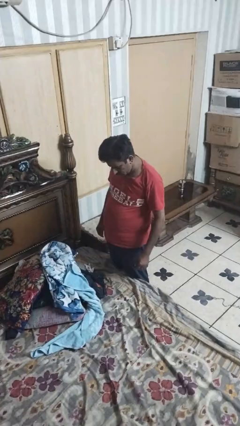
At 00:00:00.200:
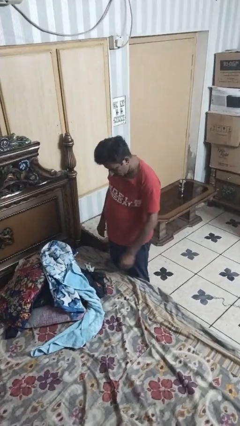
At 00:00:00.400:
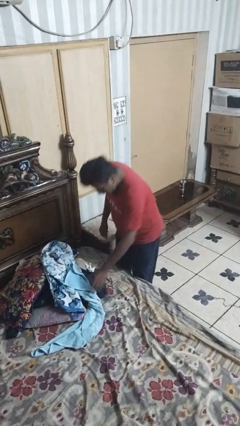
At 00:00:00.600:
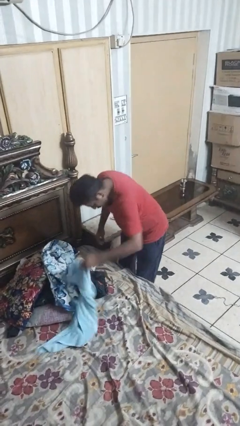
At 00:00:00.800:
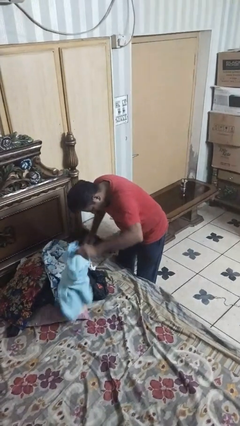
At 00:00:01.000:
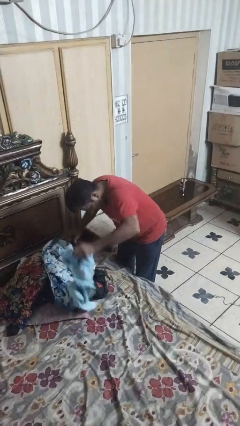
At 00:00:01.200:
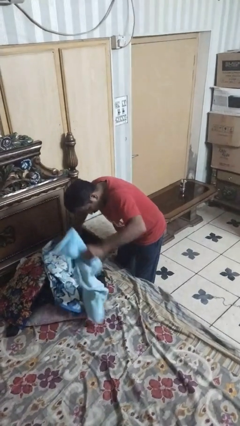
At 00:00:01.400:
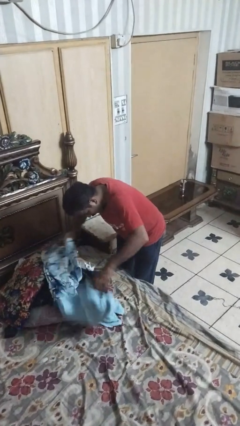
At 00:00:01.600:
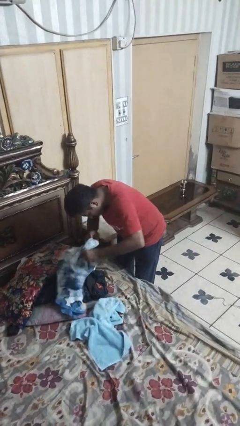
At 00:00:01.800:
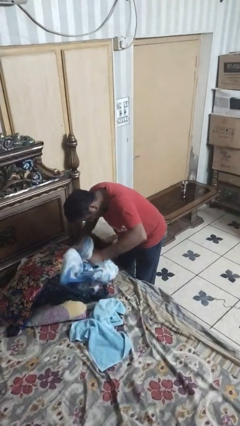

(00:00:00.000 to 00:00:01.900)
person searches under bed

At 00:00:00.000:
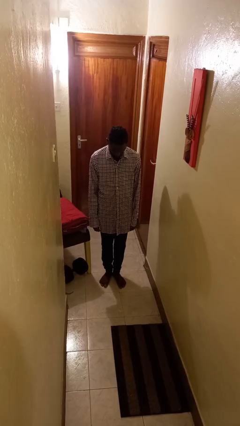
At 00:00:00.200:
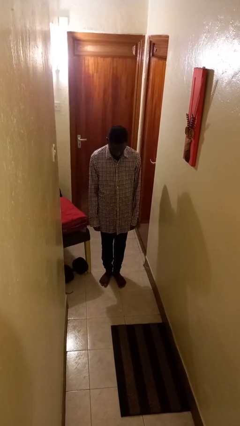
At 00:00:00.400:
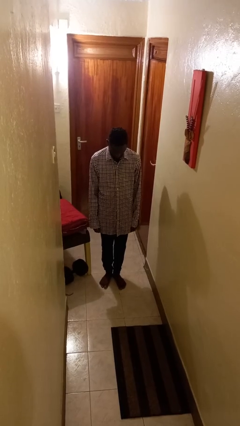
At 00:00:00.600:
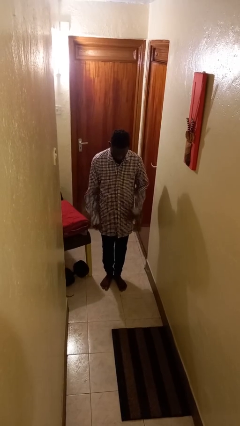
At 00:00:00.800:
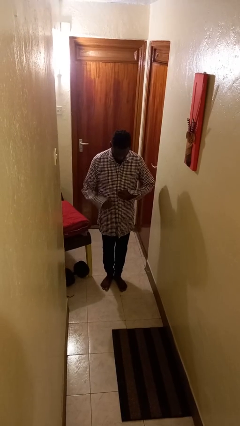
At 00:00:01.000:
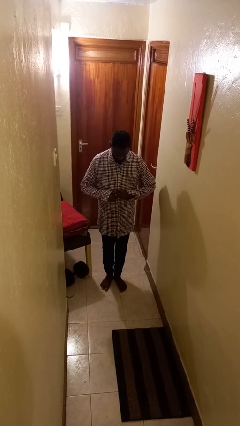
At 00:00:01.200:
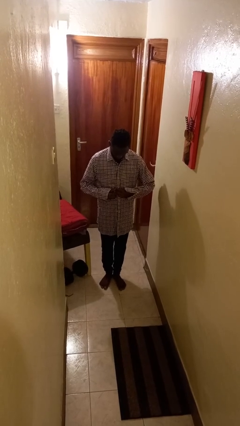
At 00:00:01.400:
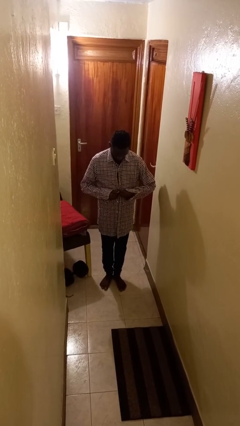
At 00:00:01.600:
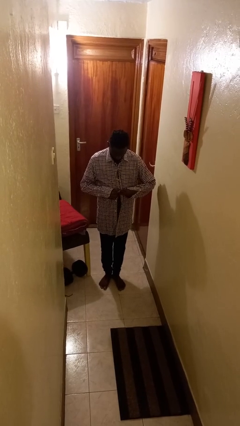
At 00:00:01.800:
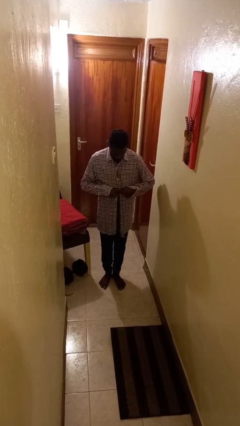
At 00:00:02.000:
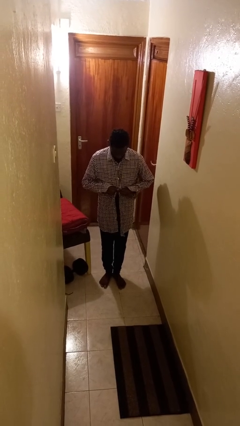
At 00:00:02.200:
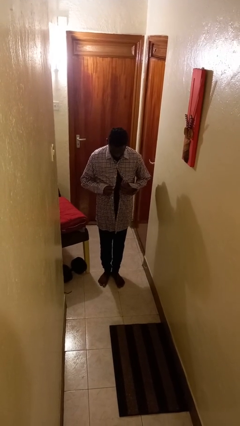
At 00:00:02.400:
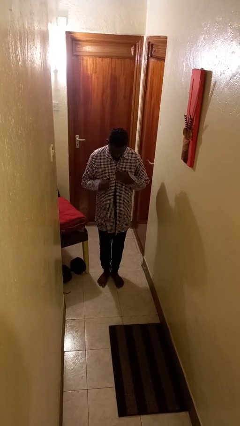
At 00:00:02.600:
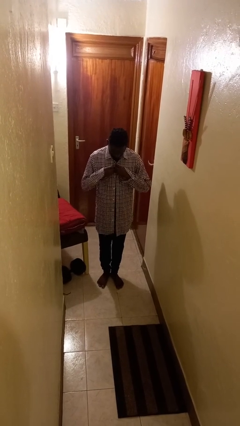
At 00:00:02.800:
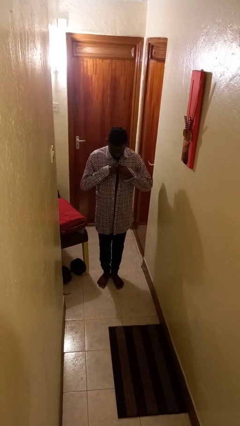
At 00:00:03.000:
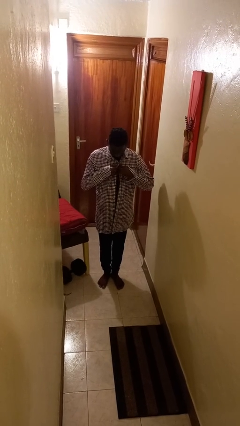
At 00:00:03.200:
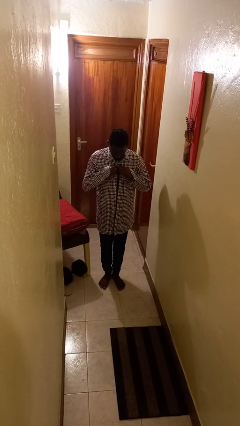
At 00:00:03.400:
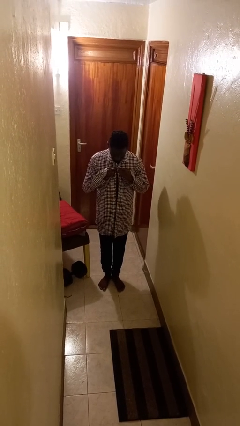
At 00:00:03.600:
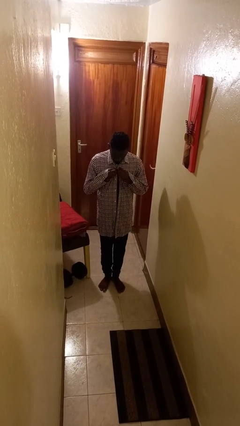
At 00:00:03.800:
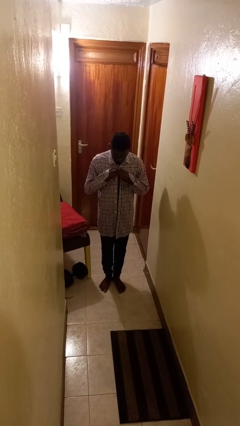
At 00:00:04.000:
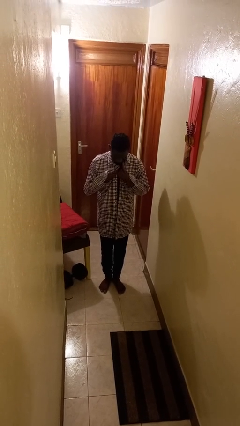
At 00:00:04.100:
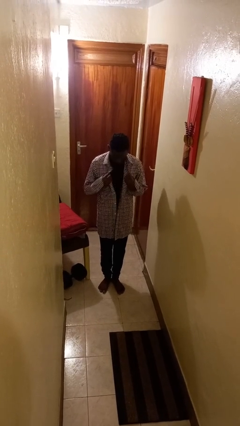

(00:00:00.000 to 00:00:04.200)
person unbuttons shirt

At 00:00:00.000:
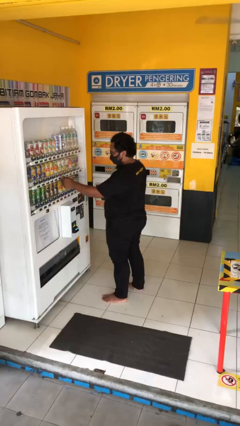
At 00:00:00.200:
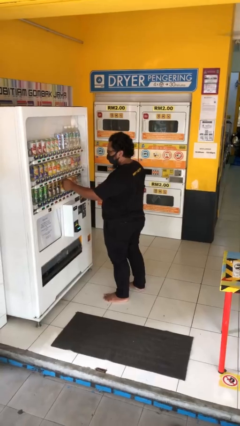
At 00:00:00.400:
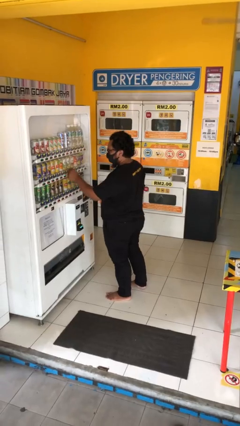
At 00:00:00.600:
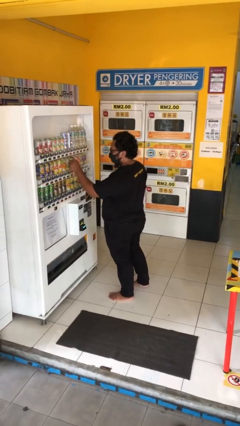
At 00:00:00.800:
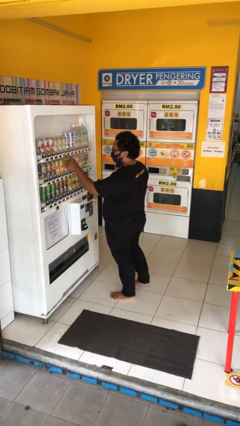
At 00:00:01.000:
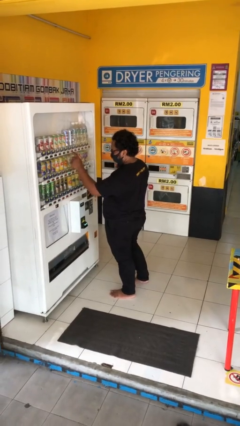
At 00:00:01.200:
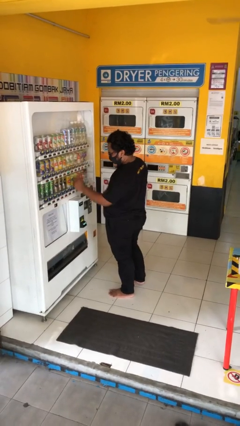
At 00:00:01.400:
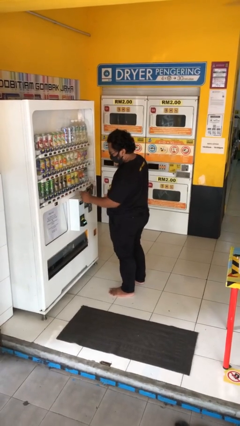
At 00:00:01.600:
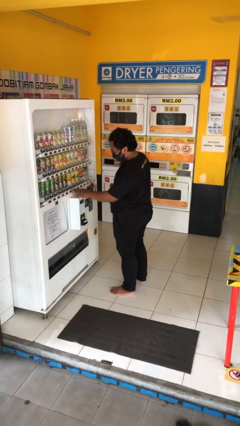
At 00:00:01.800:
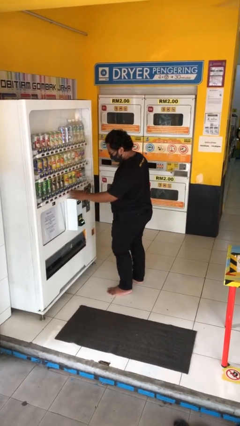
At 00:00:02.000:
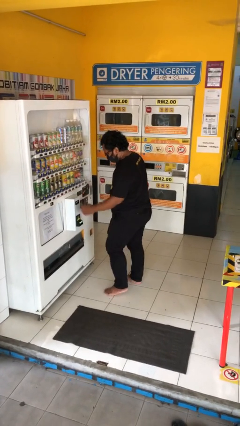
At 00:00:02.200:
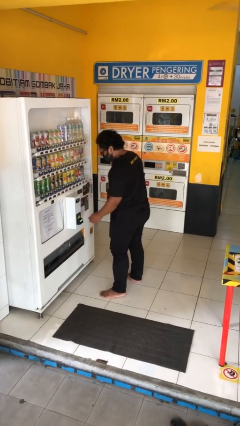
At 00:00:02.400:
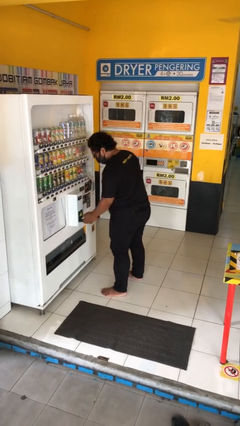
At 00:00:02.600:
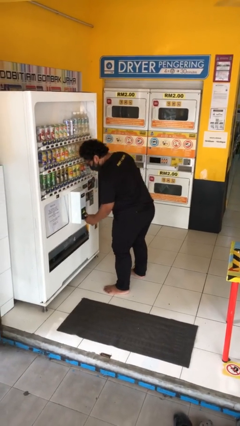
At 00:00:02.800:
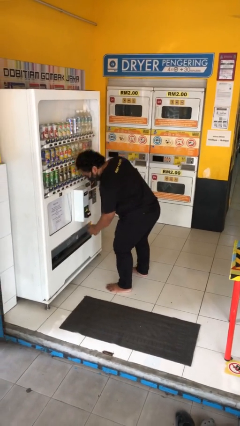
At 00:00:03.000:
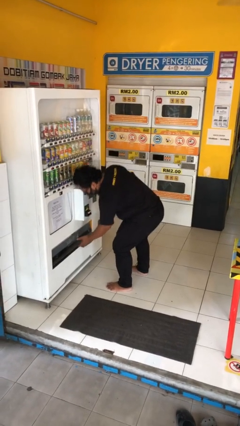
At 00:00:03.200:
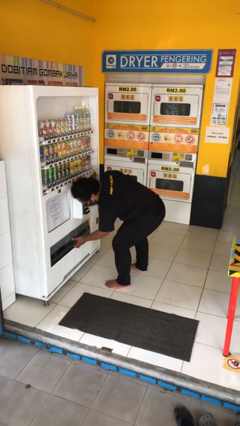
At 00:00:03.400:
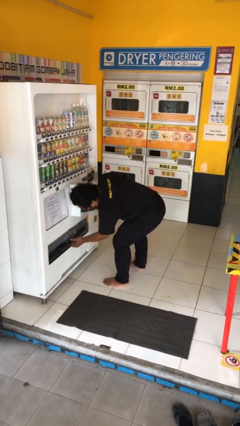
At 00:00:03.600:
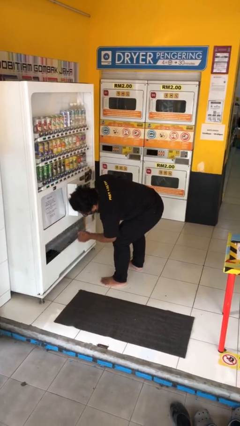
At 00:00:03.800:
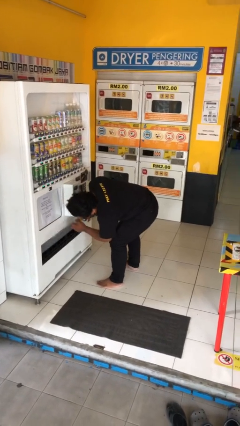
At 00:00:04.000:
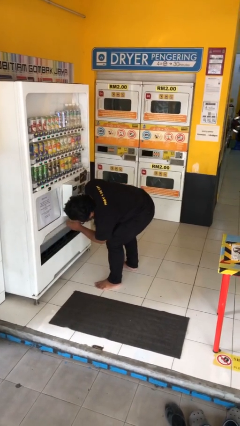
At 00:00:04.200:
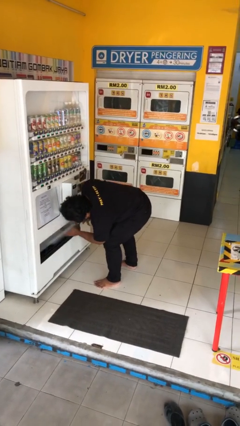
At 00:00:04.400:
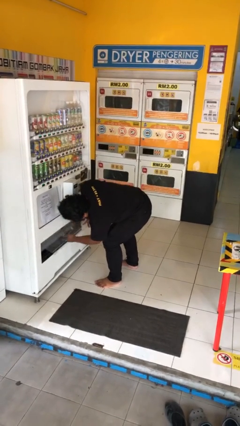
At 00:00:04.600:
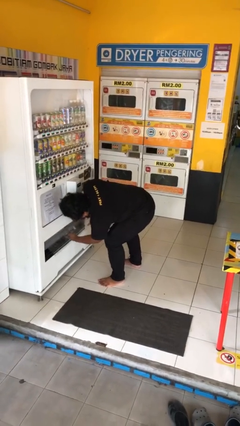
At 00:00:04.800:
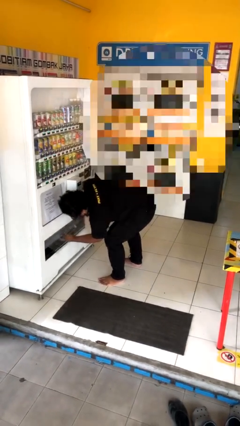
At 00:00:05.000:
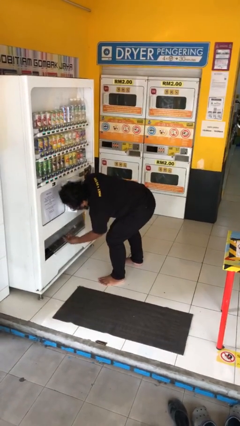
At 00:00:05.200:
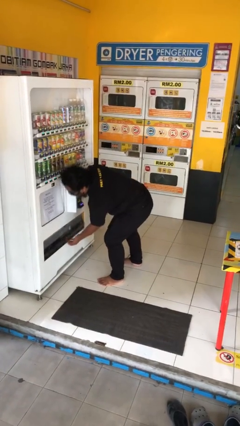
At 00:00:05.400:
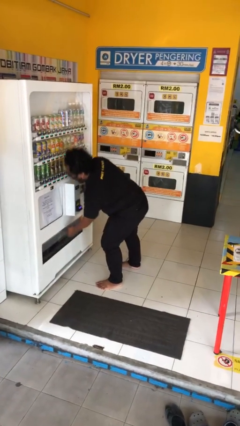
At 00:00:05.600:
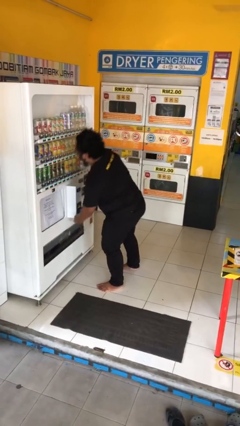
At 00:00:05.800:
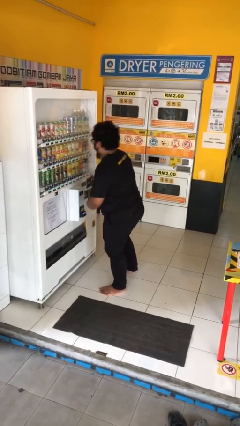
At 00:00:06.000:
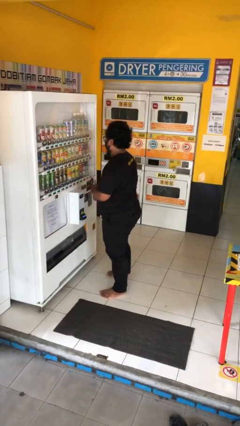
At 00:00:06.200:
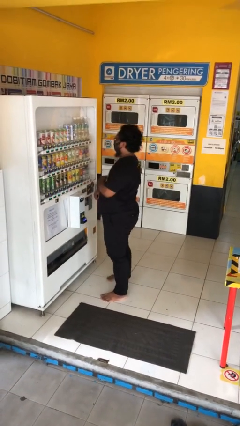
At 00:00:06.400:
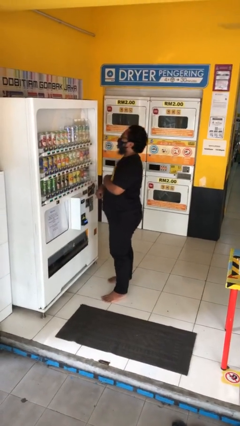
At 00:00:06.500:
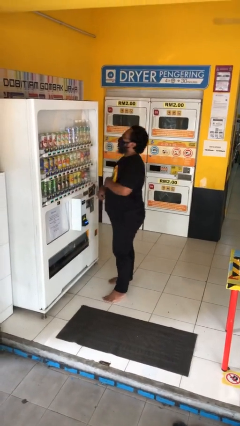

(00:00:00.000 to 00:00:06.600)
person purchases from machine

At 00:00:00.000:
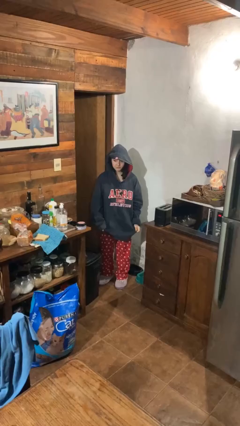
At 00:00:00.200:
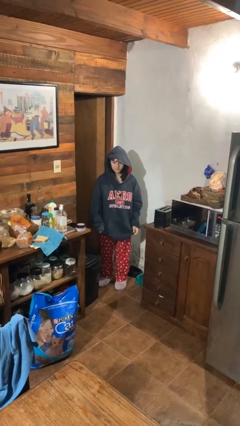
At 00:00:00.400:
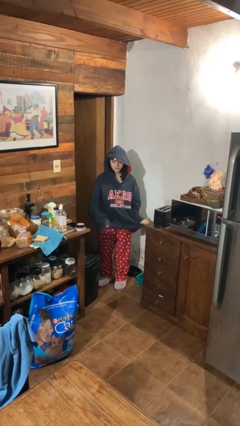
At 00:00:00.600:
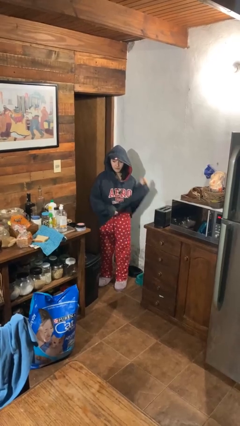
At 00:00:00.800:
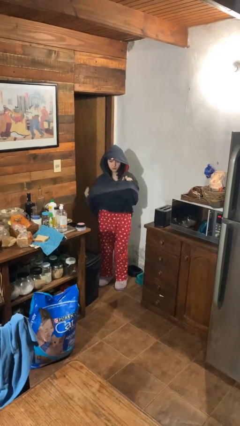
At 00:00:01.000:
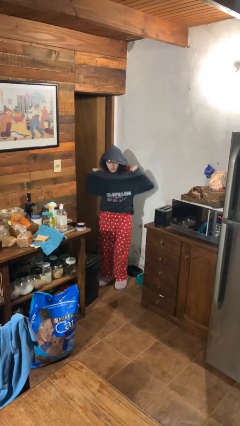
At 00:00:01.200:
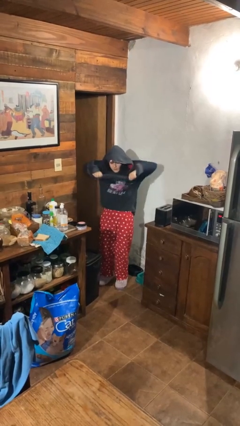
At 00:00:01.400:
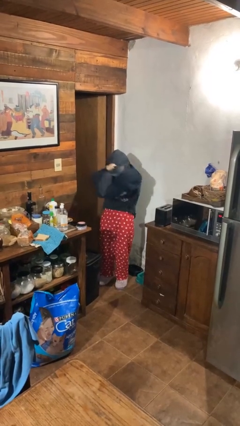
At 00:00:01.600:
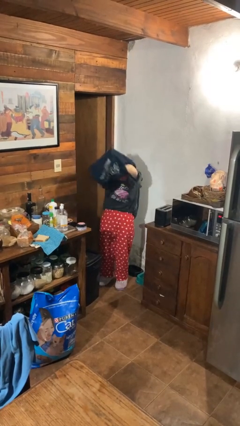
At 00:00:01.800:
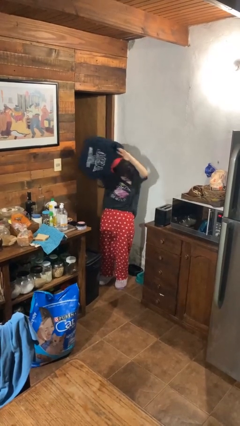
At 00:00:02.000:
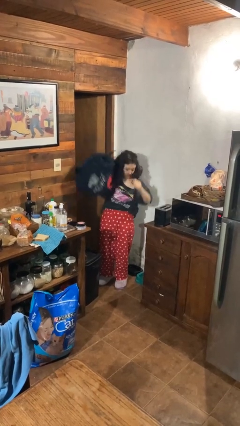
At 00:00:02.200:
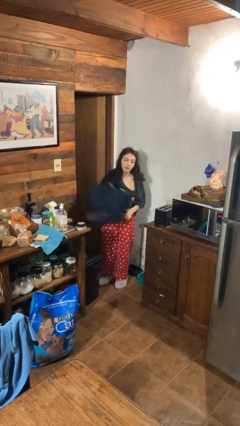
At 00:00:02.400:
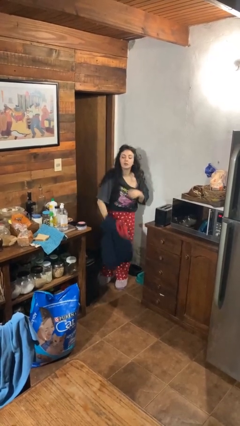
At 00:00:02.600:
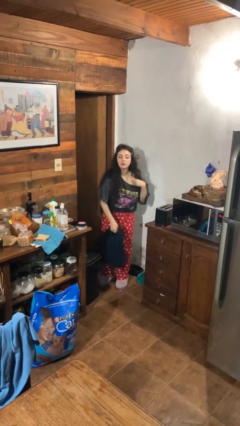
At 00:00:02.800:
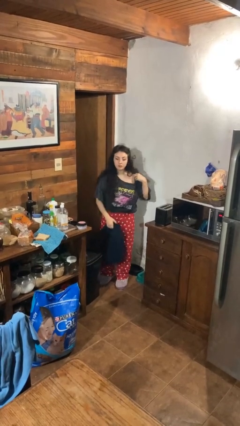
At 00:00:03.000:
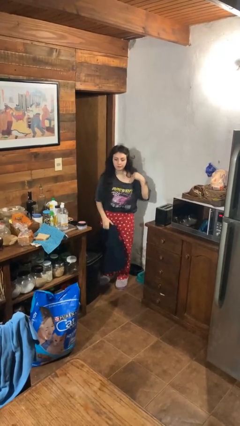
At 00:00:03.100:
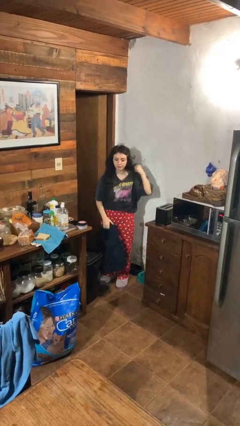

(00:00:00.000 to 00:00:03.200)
person takes off hoodie

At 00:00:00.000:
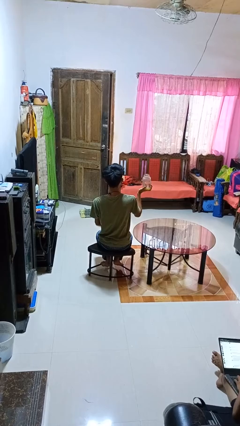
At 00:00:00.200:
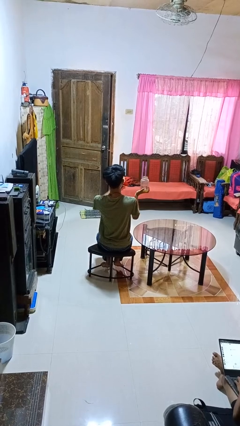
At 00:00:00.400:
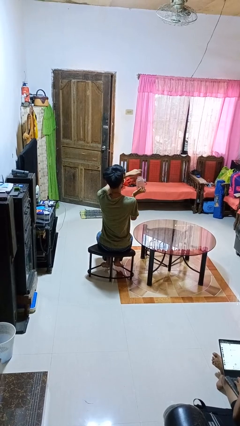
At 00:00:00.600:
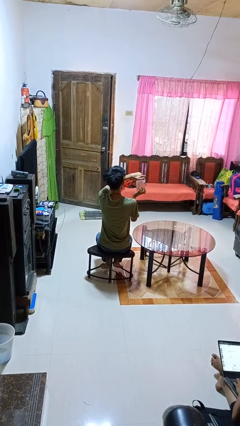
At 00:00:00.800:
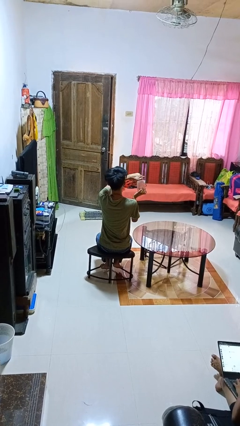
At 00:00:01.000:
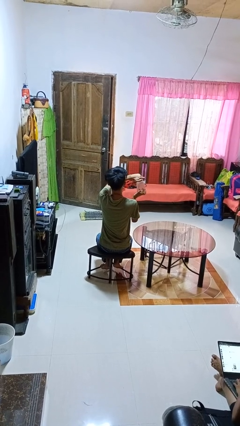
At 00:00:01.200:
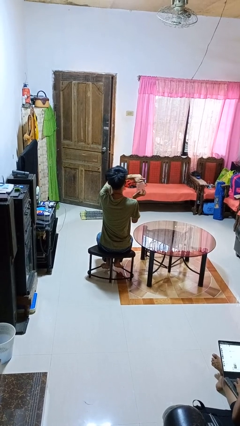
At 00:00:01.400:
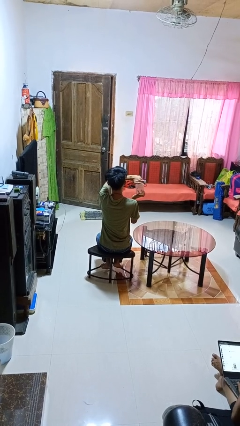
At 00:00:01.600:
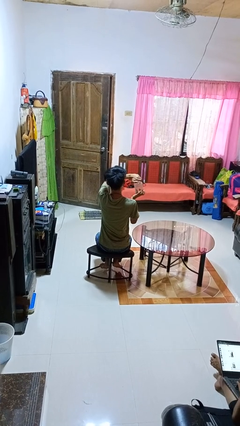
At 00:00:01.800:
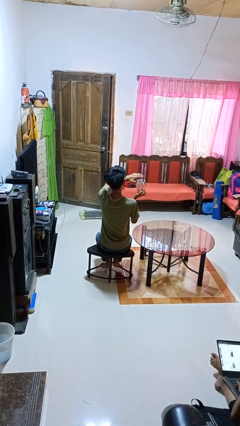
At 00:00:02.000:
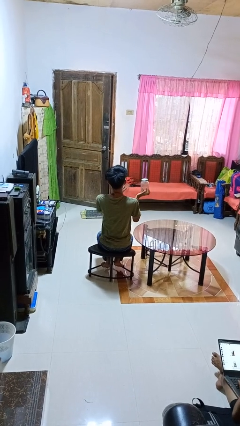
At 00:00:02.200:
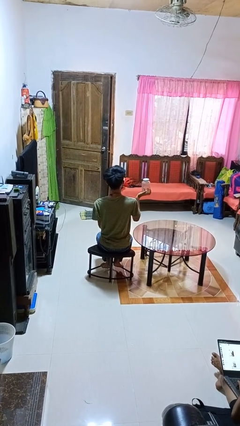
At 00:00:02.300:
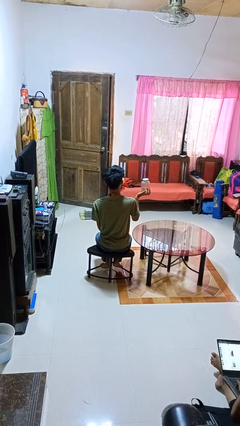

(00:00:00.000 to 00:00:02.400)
person closes jar
